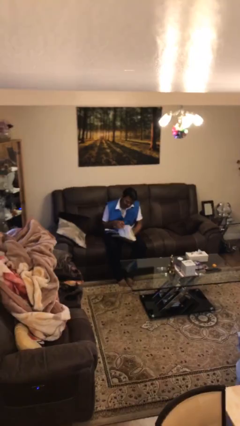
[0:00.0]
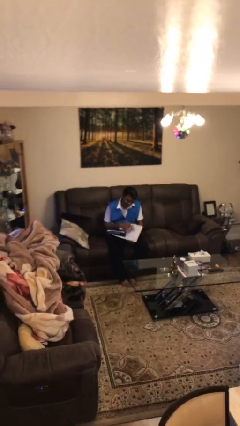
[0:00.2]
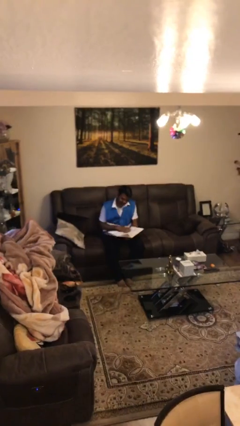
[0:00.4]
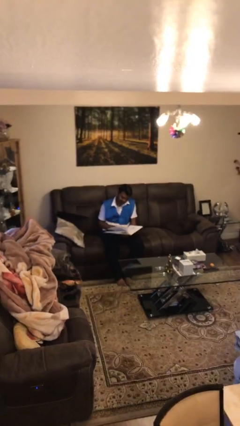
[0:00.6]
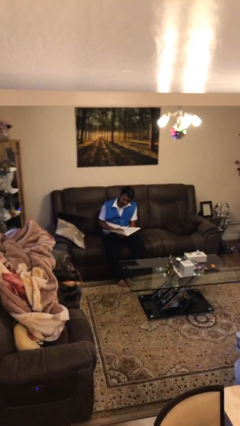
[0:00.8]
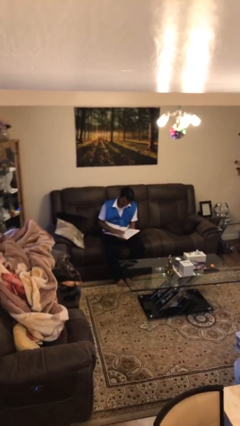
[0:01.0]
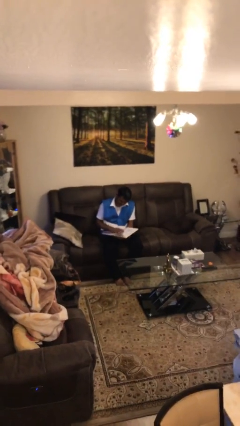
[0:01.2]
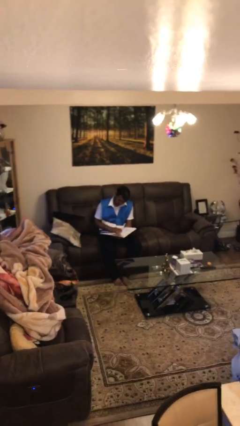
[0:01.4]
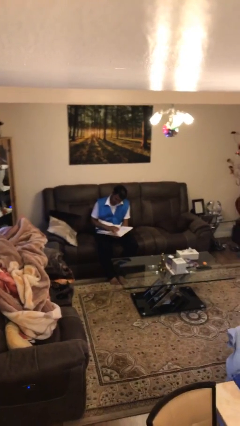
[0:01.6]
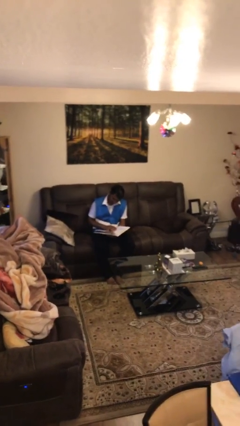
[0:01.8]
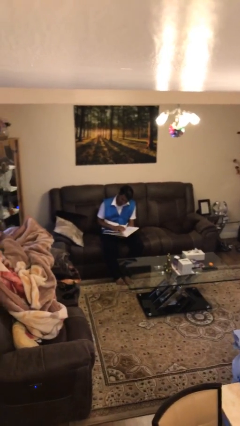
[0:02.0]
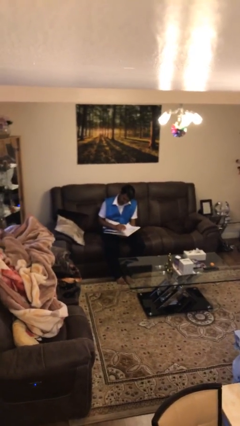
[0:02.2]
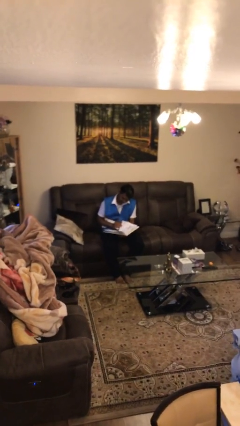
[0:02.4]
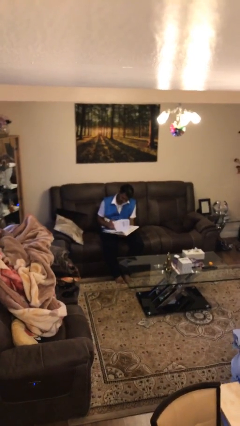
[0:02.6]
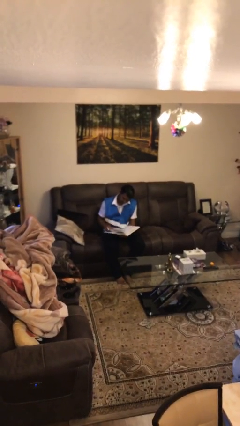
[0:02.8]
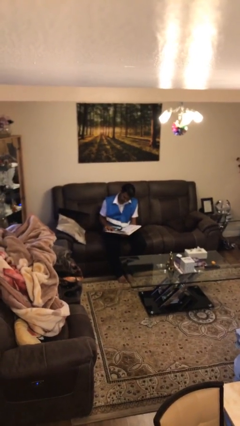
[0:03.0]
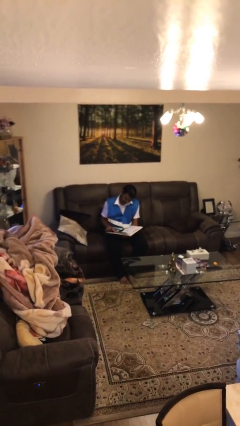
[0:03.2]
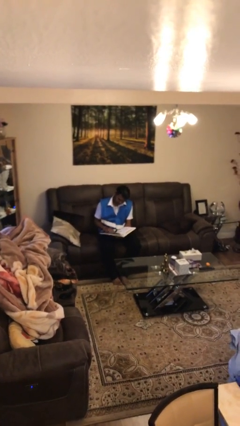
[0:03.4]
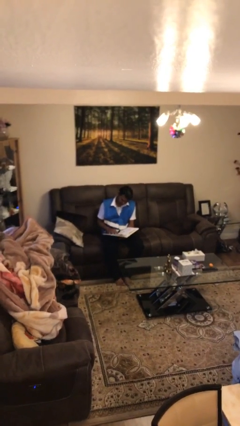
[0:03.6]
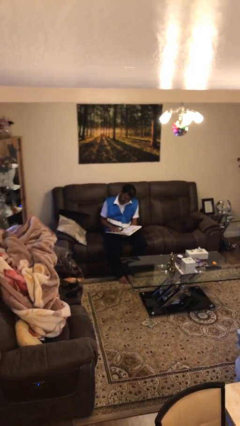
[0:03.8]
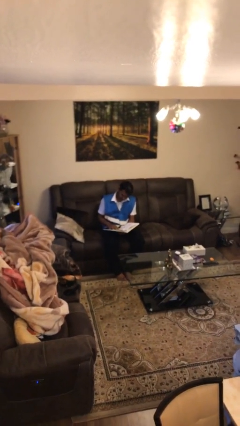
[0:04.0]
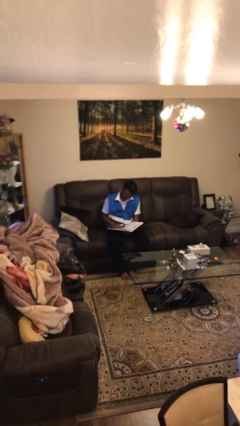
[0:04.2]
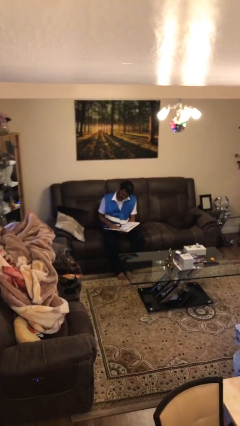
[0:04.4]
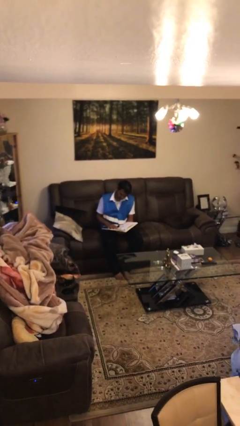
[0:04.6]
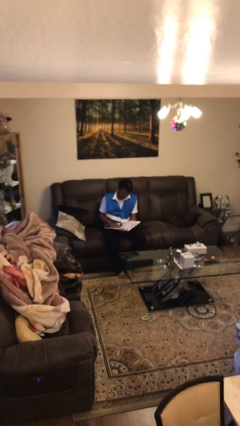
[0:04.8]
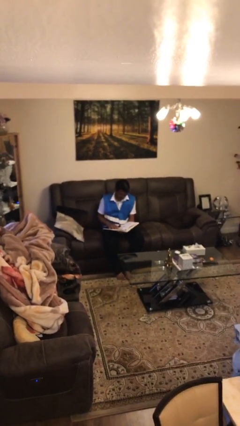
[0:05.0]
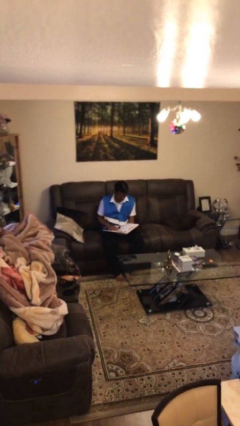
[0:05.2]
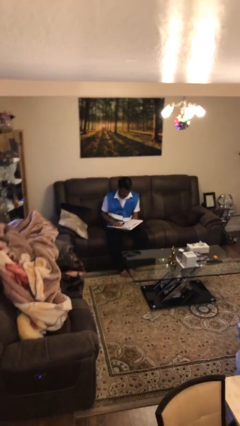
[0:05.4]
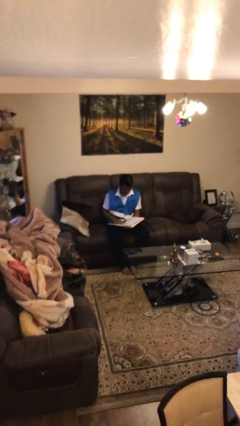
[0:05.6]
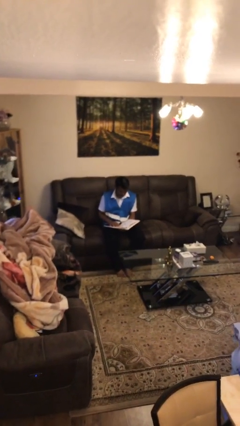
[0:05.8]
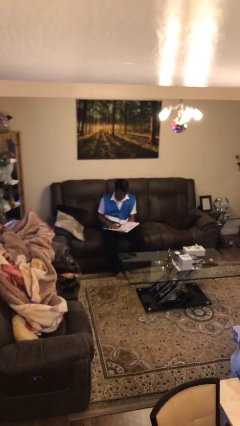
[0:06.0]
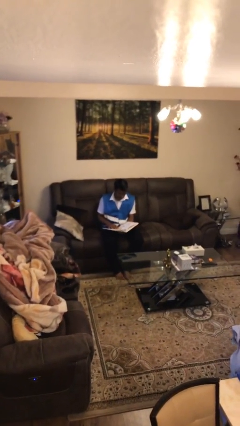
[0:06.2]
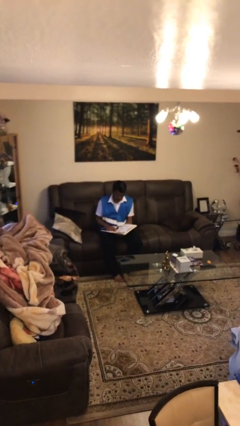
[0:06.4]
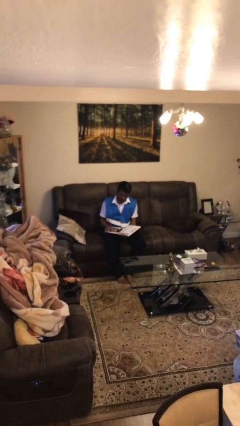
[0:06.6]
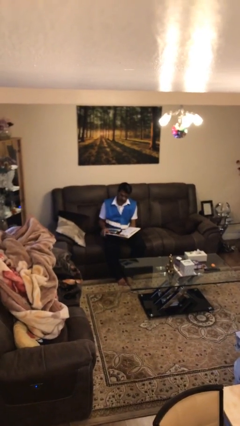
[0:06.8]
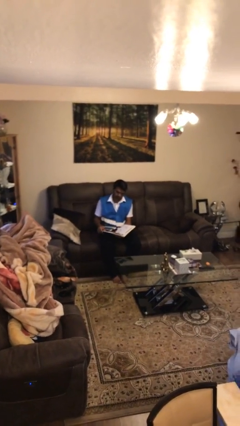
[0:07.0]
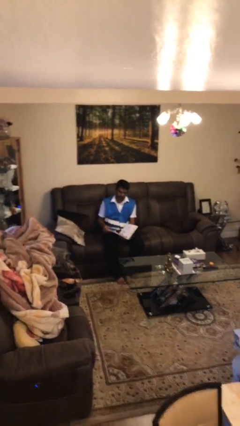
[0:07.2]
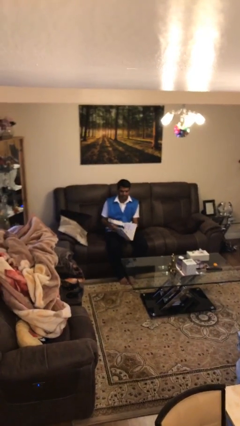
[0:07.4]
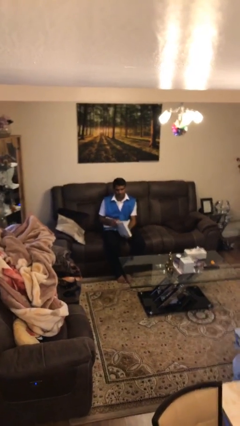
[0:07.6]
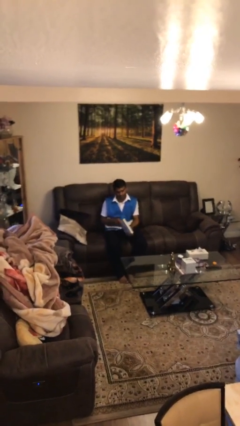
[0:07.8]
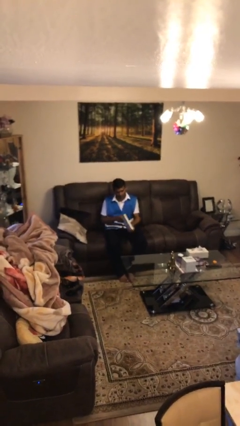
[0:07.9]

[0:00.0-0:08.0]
person reads document

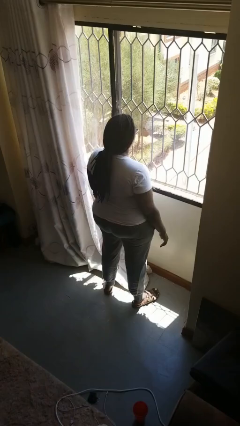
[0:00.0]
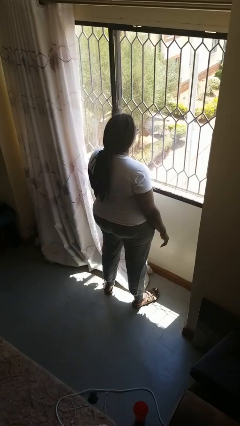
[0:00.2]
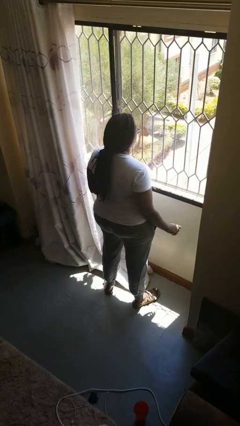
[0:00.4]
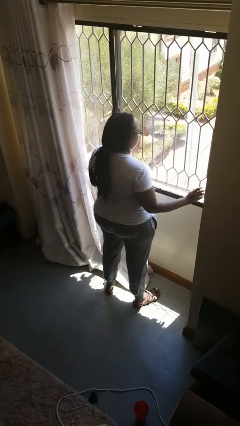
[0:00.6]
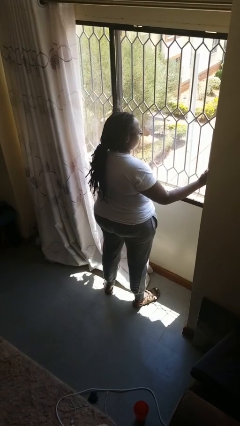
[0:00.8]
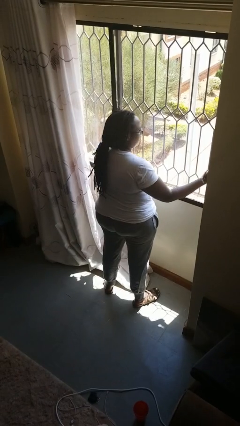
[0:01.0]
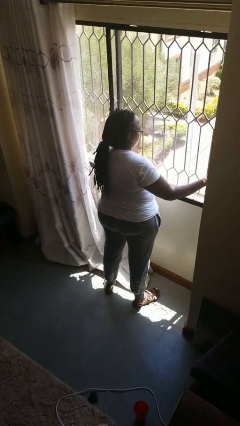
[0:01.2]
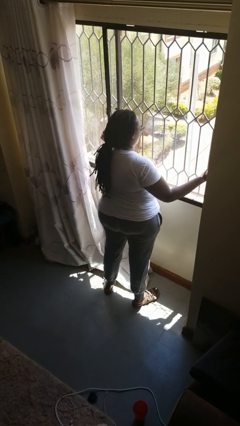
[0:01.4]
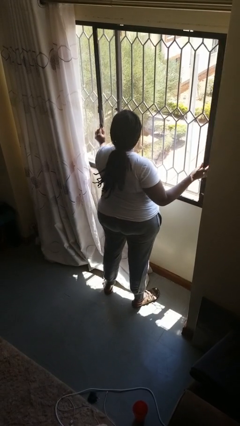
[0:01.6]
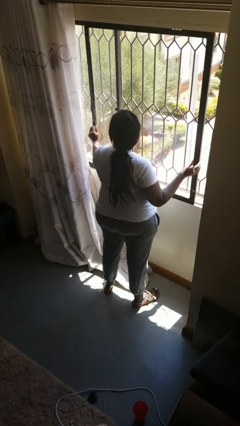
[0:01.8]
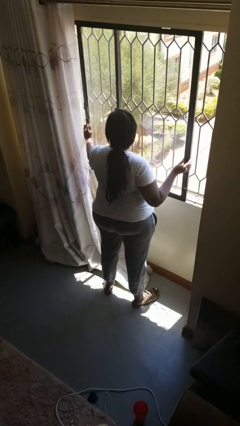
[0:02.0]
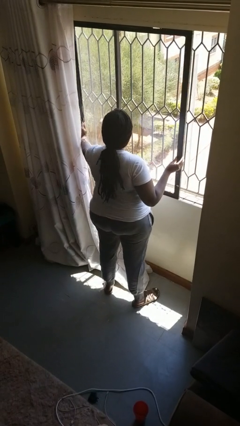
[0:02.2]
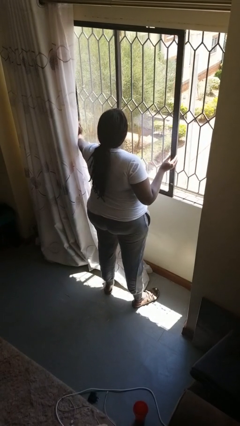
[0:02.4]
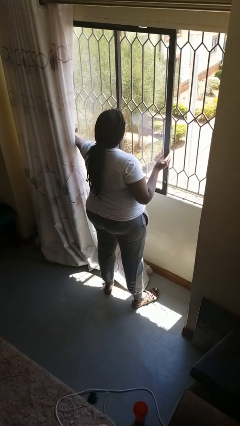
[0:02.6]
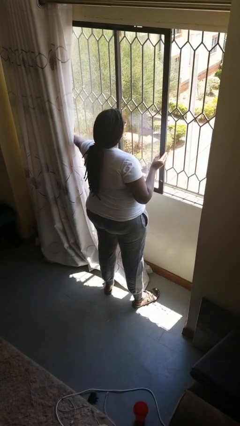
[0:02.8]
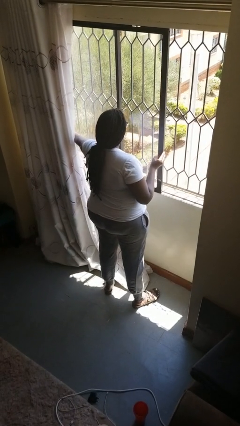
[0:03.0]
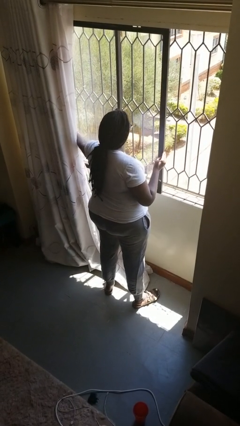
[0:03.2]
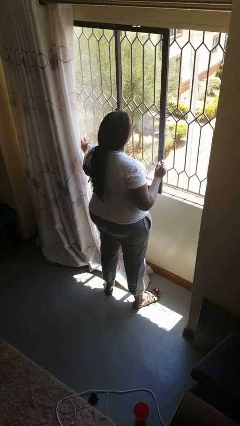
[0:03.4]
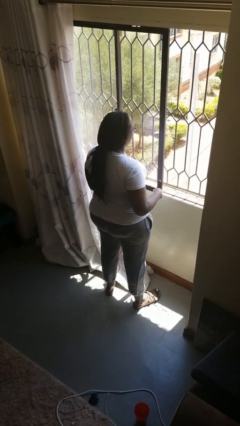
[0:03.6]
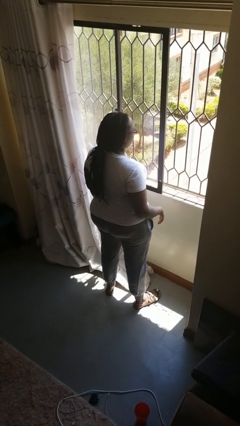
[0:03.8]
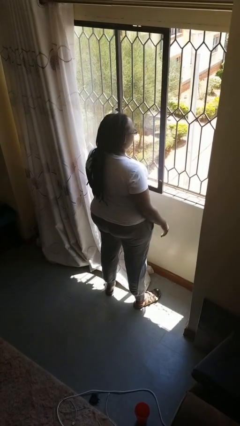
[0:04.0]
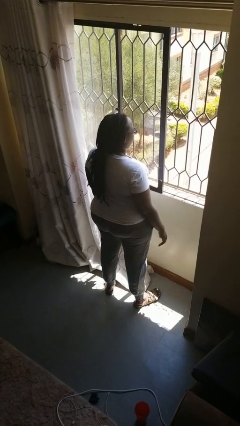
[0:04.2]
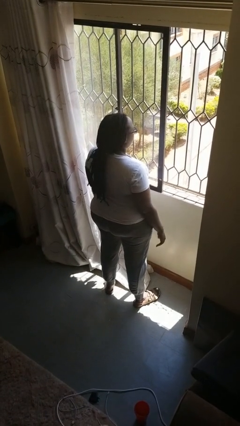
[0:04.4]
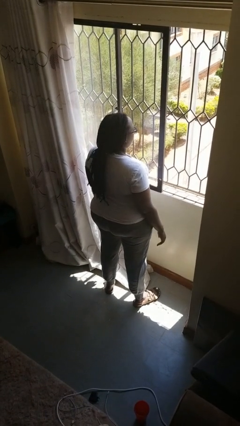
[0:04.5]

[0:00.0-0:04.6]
person opens home window

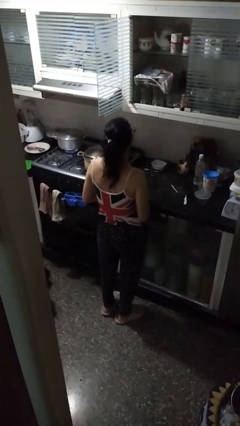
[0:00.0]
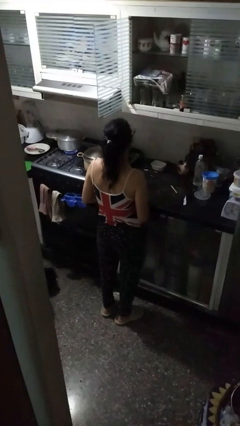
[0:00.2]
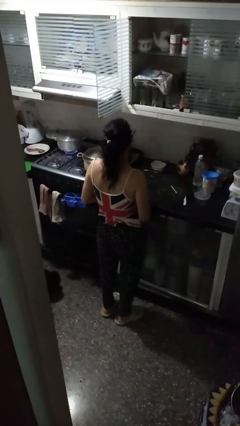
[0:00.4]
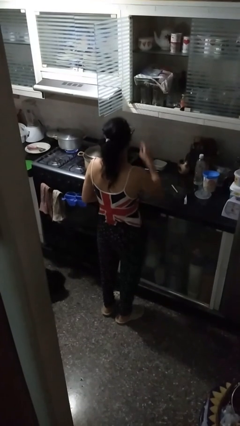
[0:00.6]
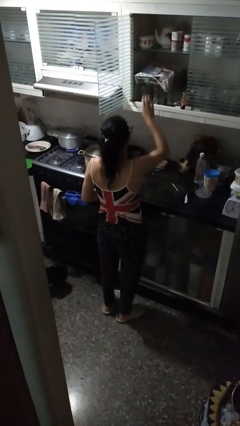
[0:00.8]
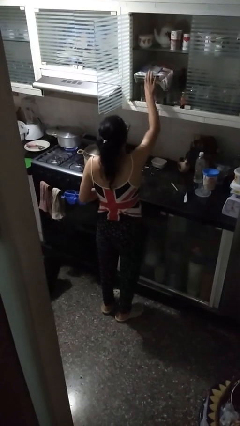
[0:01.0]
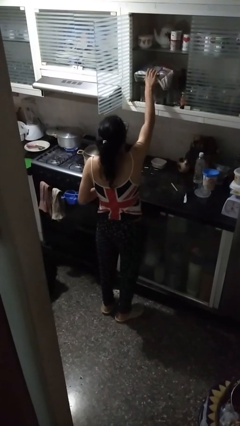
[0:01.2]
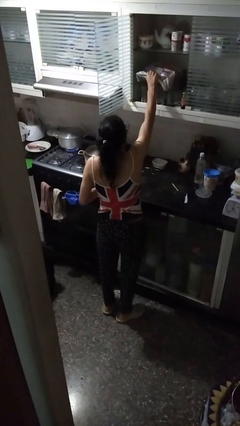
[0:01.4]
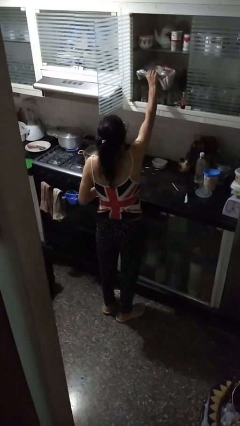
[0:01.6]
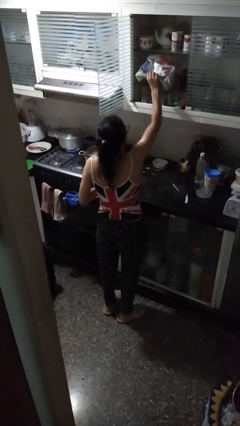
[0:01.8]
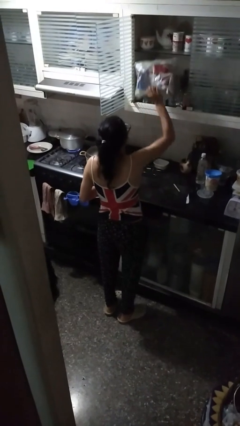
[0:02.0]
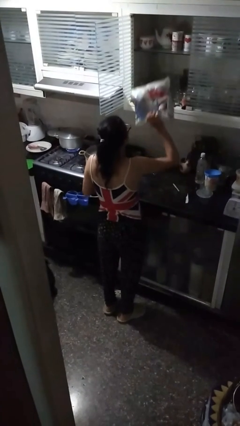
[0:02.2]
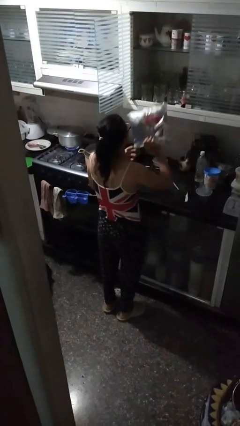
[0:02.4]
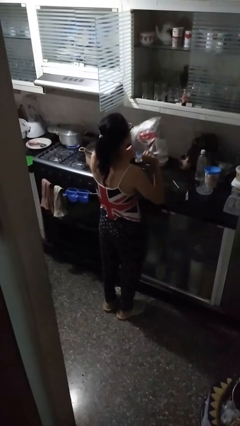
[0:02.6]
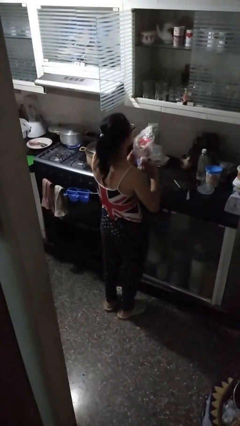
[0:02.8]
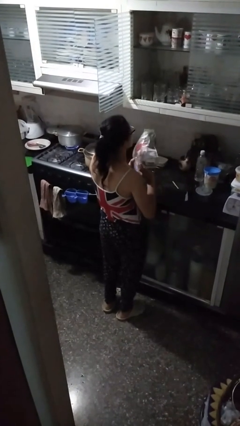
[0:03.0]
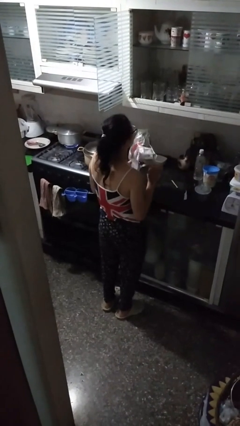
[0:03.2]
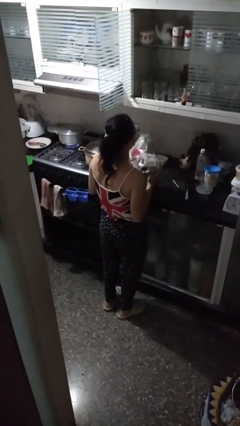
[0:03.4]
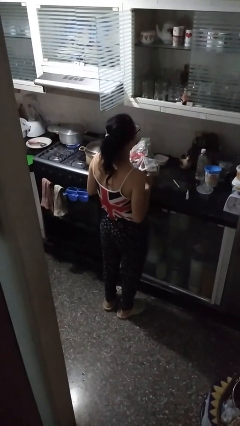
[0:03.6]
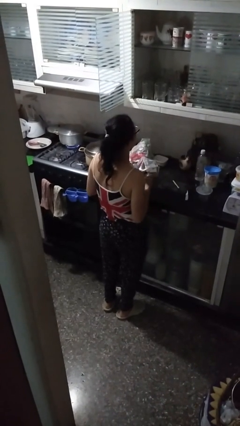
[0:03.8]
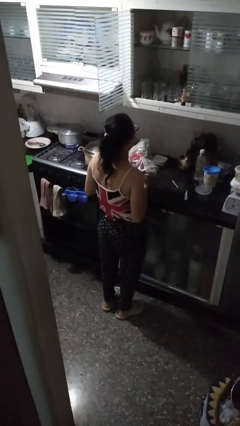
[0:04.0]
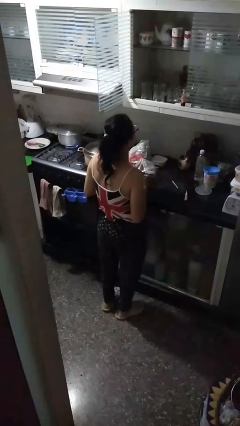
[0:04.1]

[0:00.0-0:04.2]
person picks up object from cabinet

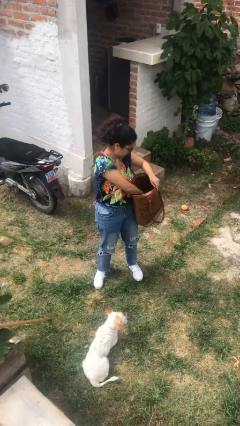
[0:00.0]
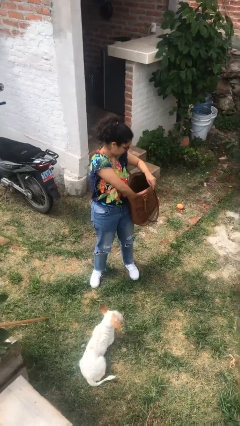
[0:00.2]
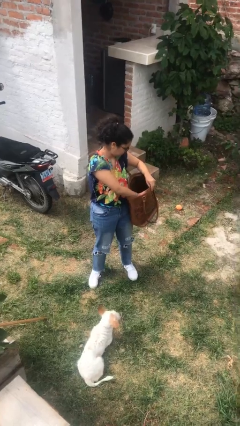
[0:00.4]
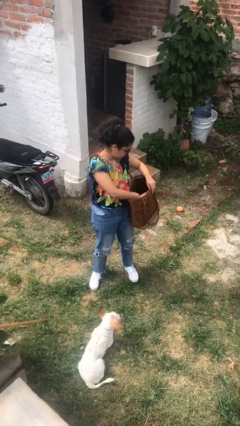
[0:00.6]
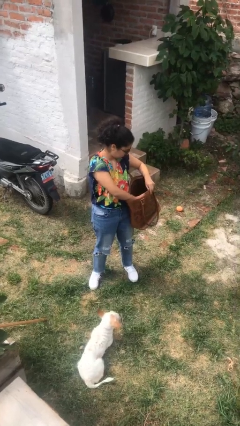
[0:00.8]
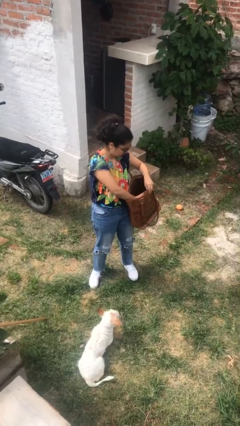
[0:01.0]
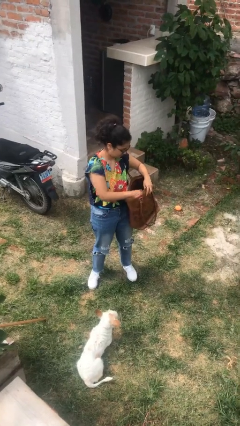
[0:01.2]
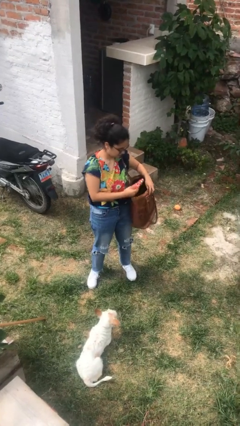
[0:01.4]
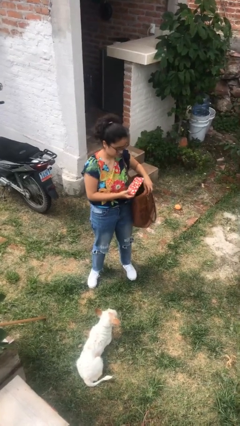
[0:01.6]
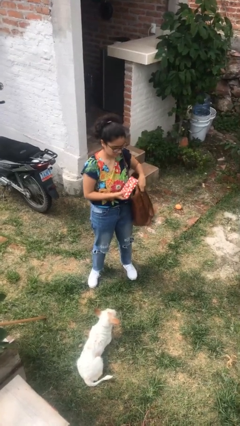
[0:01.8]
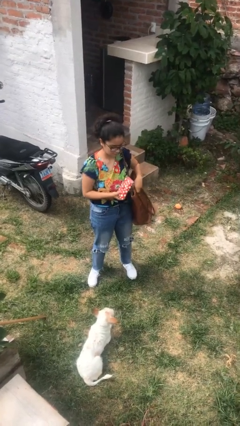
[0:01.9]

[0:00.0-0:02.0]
person takes object from purse
